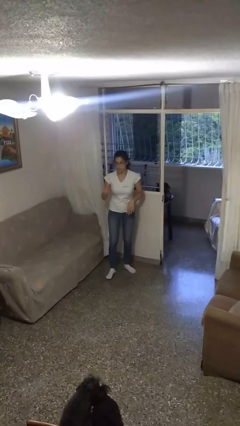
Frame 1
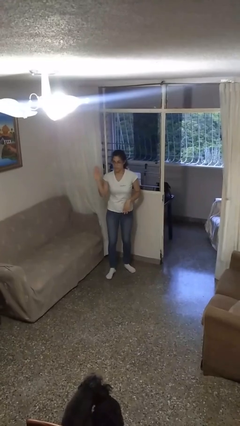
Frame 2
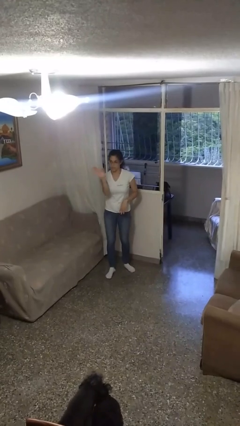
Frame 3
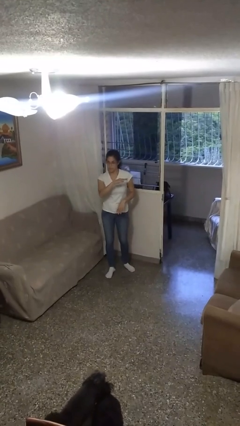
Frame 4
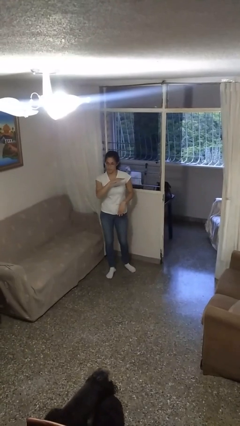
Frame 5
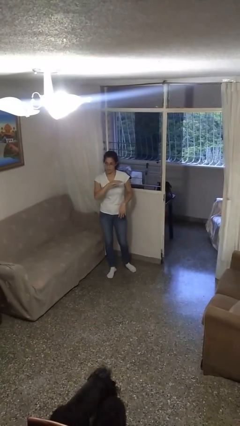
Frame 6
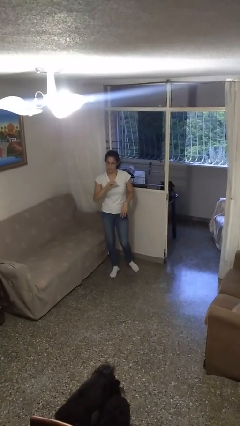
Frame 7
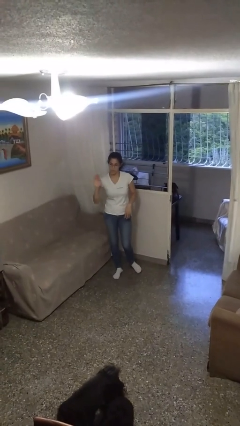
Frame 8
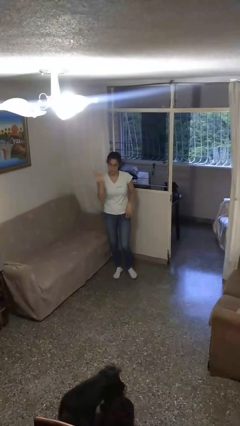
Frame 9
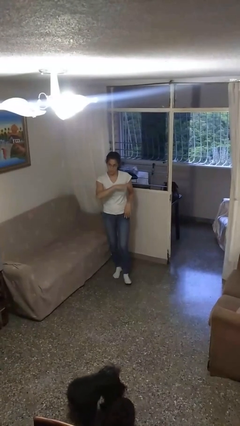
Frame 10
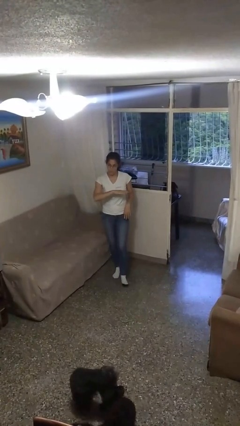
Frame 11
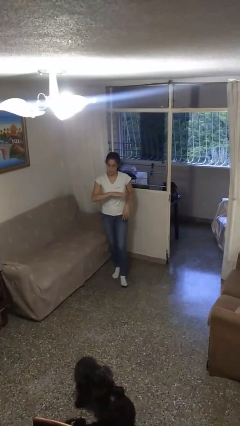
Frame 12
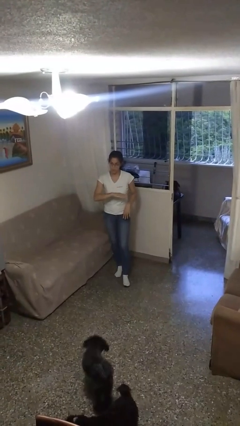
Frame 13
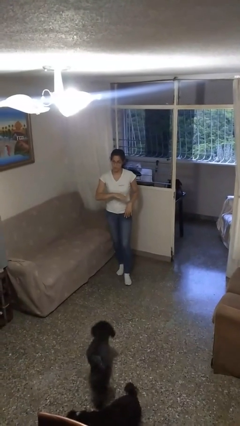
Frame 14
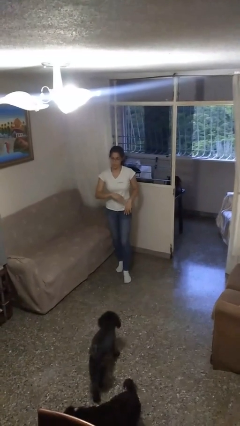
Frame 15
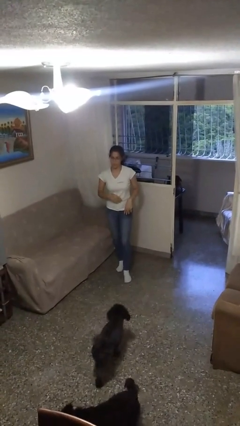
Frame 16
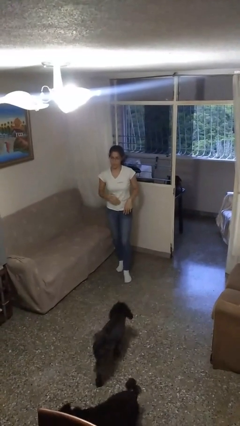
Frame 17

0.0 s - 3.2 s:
person gestures swipe left

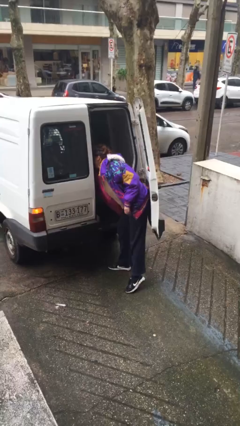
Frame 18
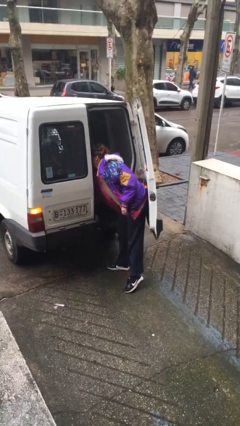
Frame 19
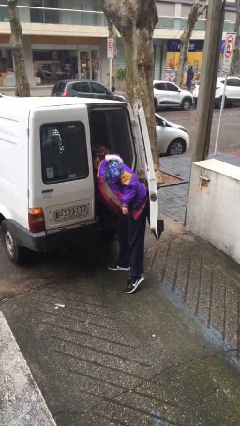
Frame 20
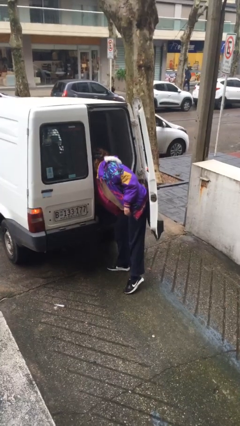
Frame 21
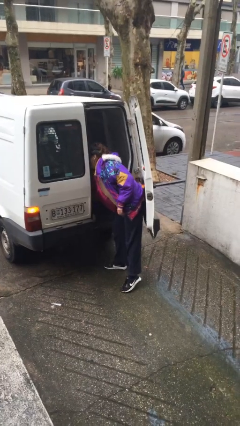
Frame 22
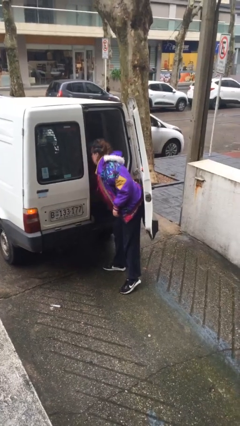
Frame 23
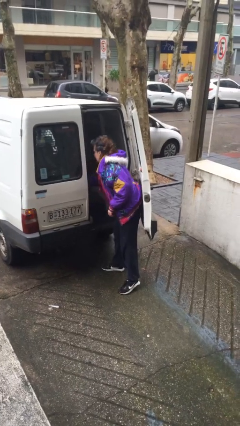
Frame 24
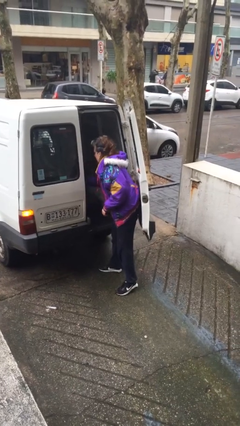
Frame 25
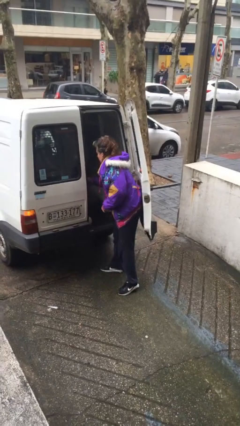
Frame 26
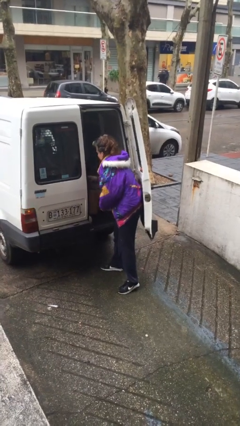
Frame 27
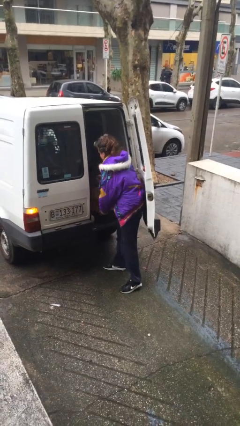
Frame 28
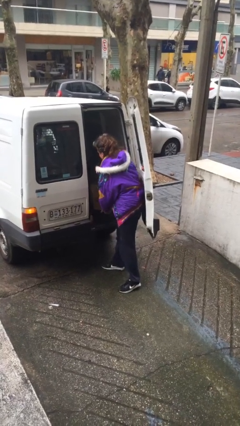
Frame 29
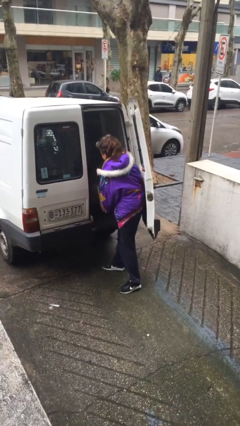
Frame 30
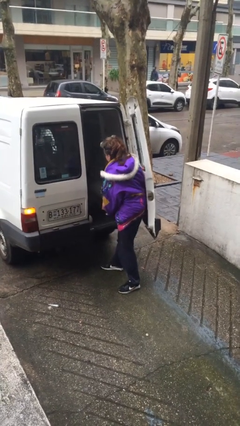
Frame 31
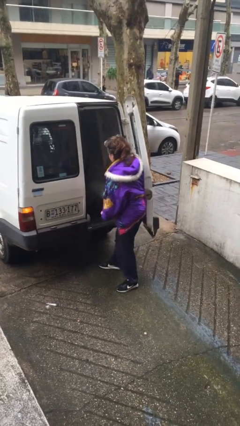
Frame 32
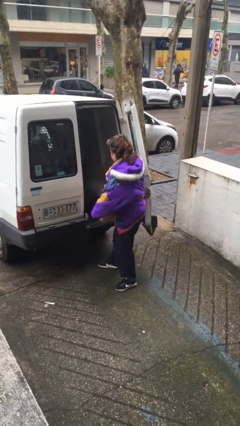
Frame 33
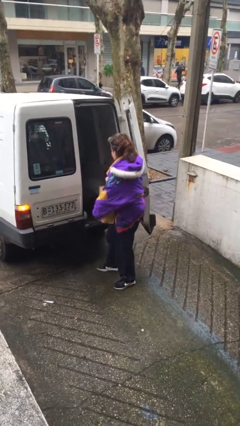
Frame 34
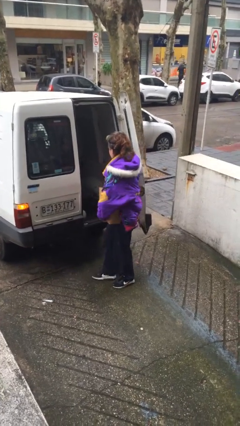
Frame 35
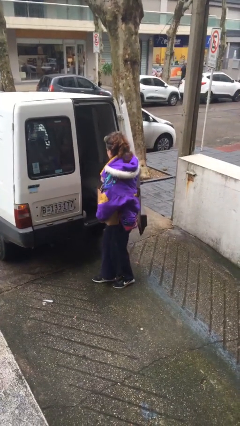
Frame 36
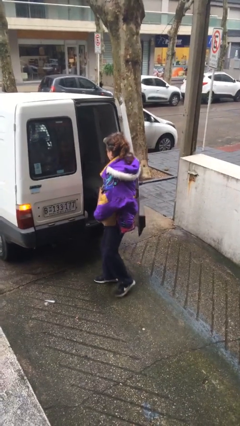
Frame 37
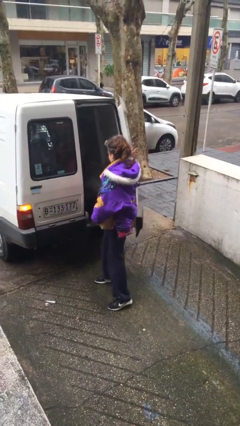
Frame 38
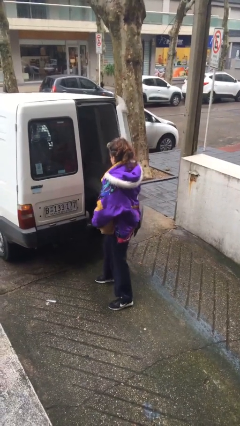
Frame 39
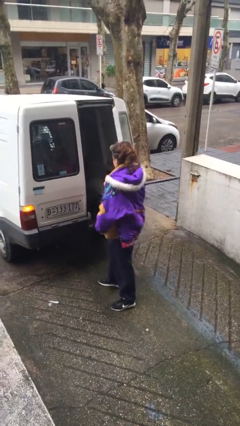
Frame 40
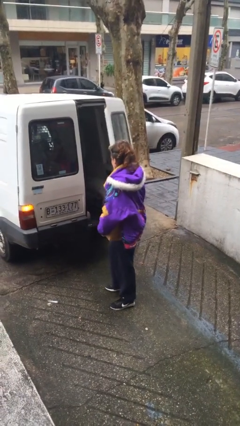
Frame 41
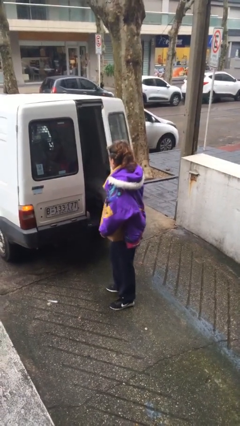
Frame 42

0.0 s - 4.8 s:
person unloads car

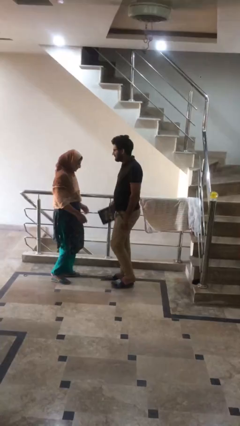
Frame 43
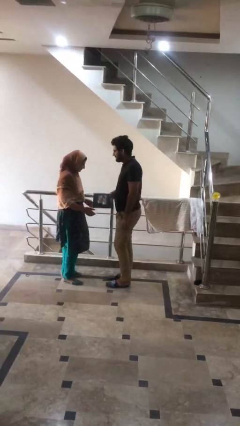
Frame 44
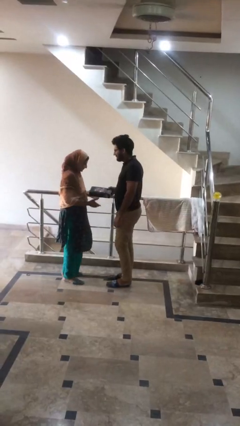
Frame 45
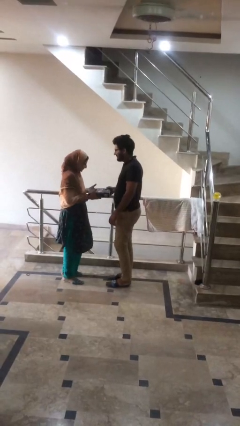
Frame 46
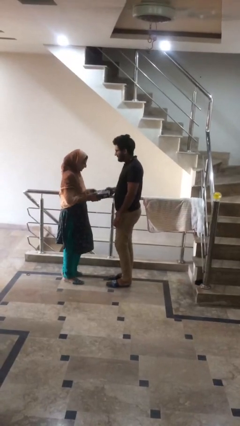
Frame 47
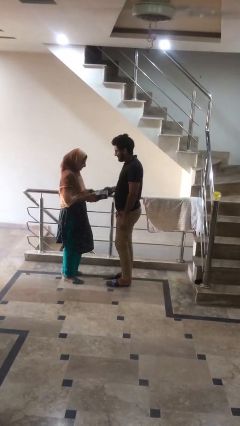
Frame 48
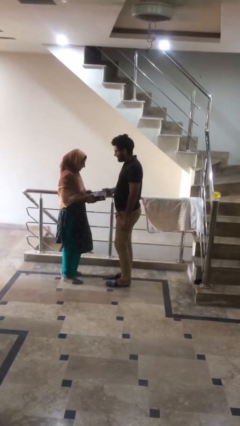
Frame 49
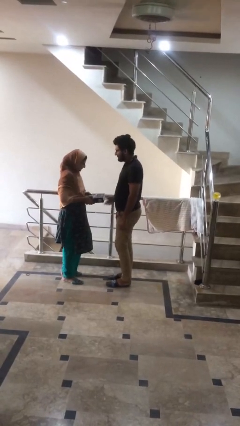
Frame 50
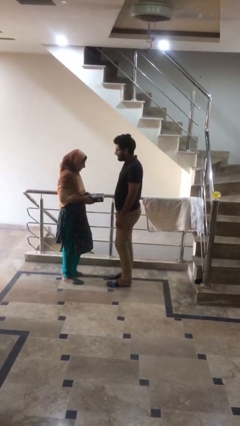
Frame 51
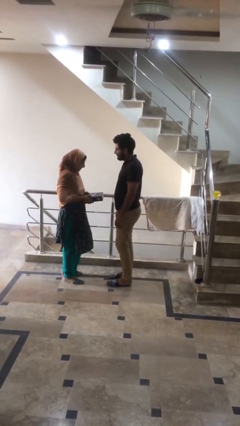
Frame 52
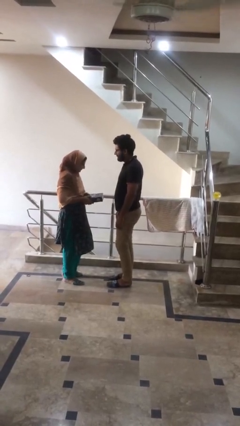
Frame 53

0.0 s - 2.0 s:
person transfers object to person

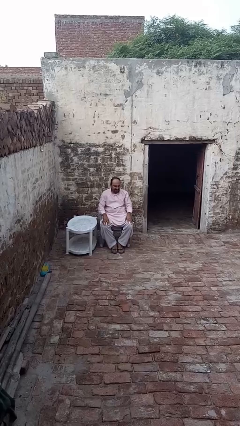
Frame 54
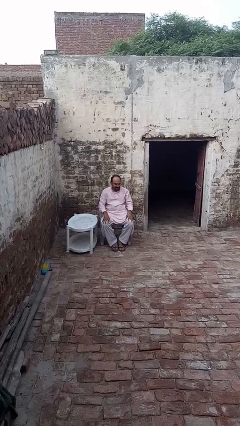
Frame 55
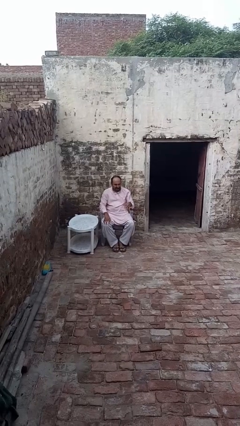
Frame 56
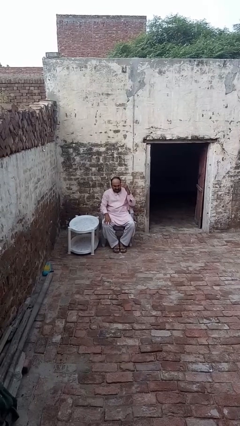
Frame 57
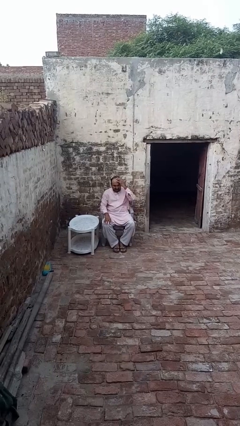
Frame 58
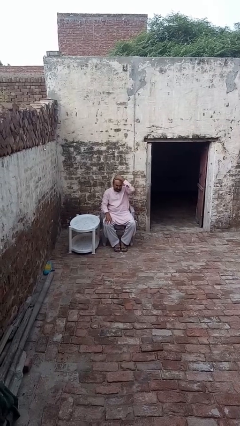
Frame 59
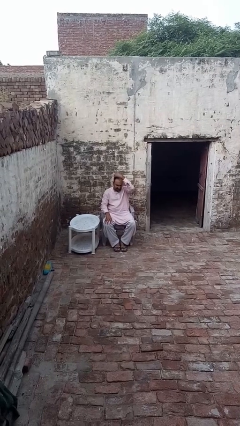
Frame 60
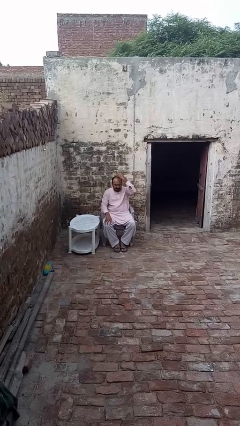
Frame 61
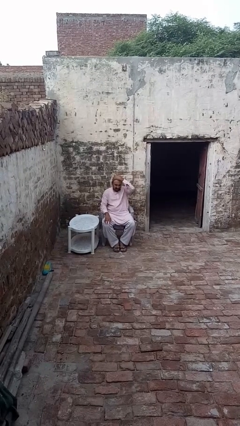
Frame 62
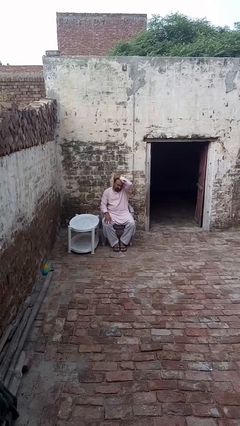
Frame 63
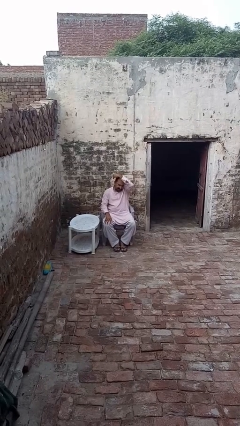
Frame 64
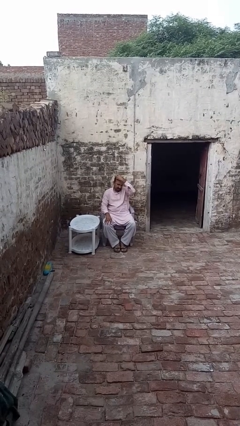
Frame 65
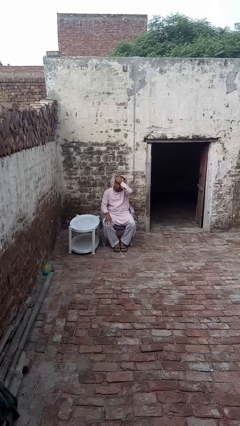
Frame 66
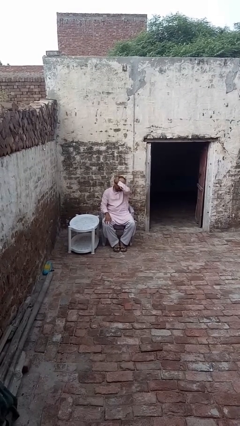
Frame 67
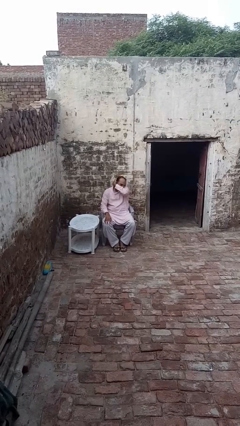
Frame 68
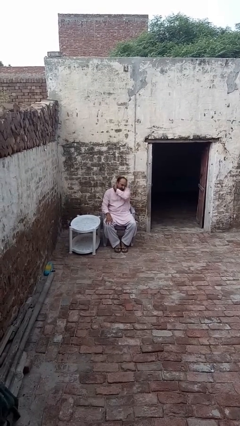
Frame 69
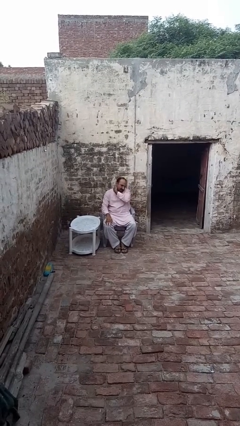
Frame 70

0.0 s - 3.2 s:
person strokes hair

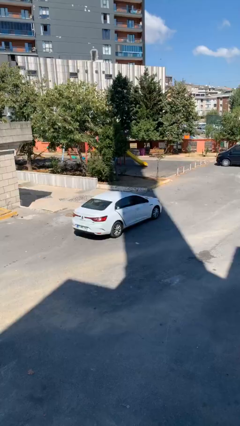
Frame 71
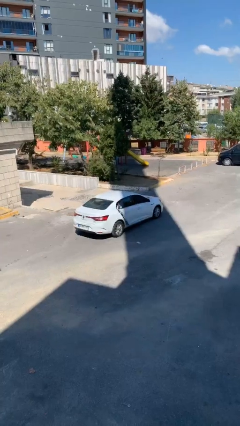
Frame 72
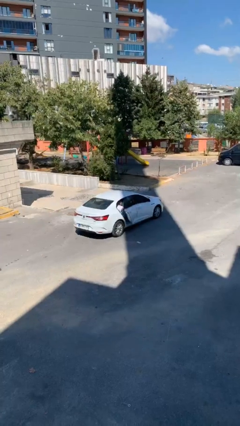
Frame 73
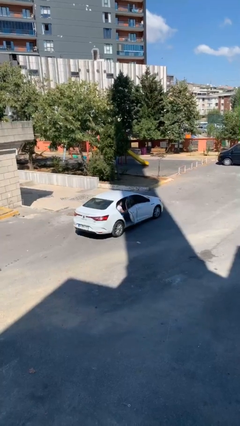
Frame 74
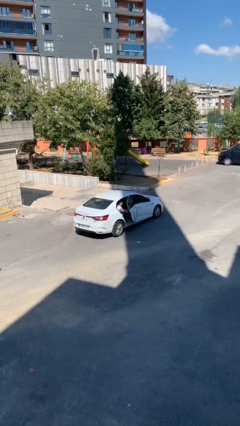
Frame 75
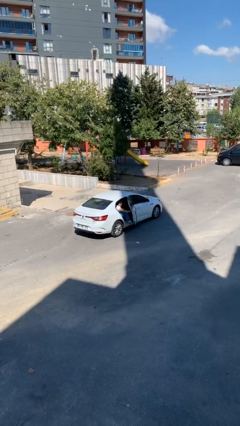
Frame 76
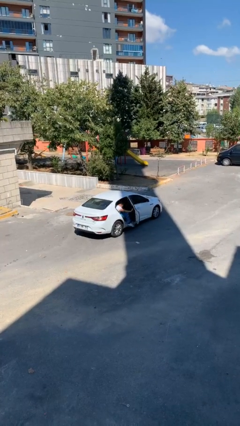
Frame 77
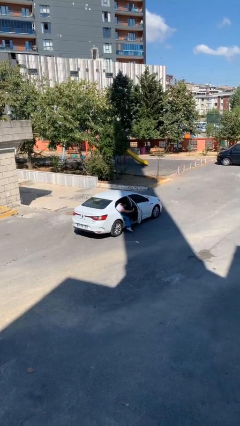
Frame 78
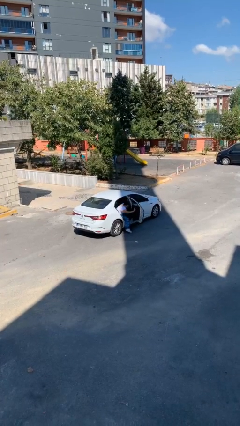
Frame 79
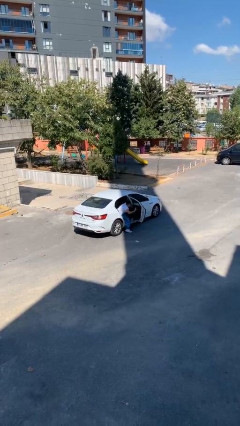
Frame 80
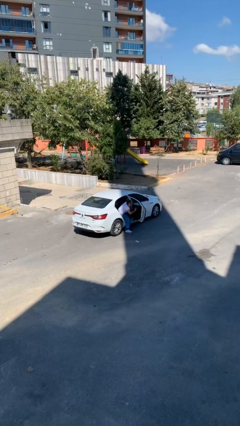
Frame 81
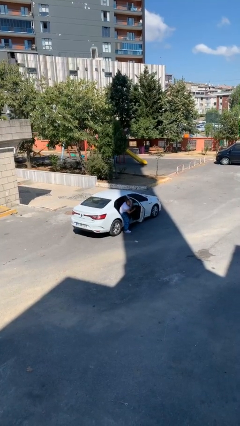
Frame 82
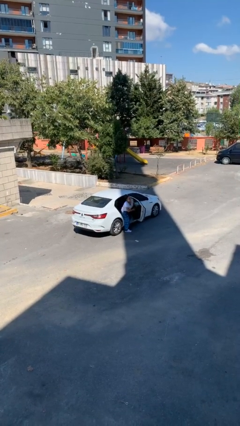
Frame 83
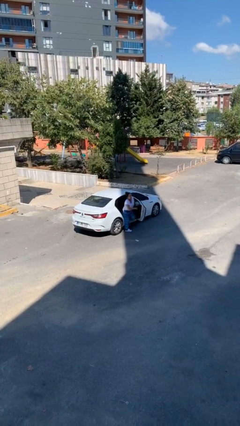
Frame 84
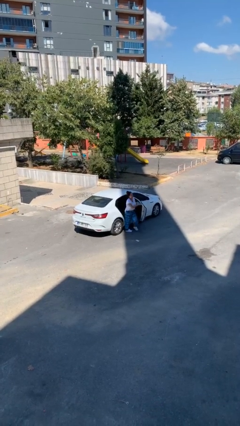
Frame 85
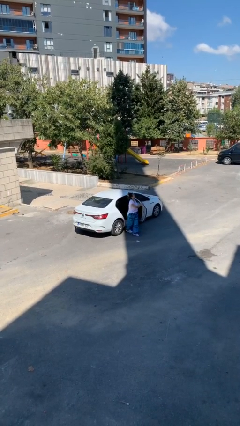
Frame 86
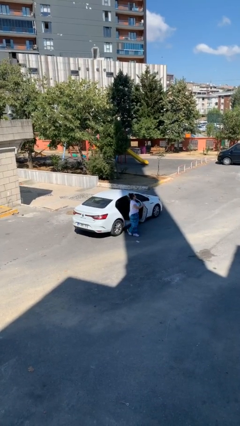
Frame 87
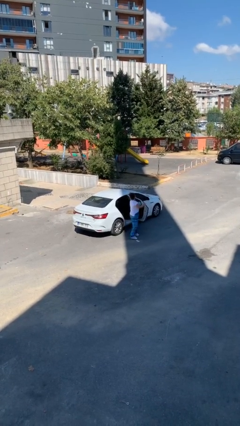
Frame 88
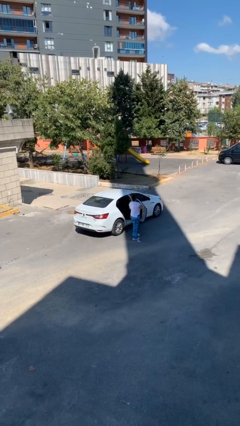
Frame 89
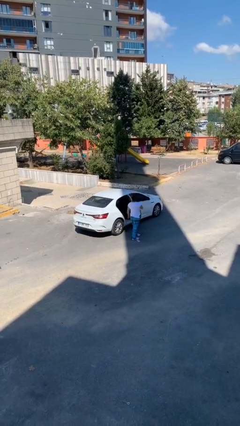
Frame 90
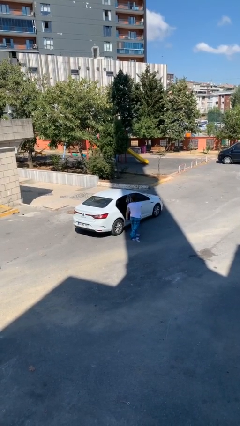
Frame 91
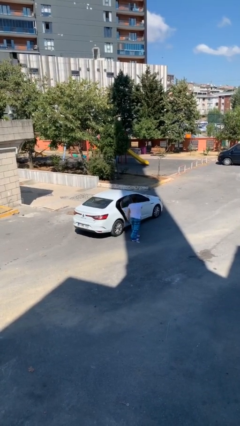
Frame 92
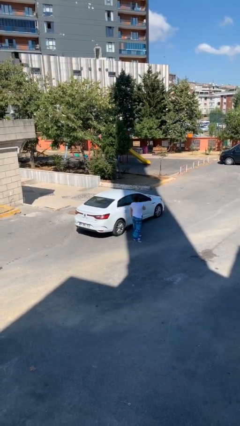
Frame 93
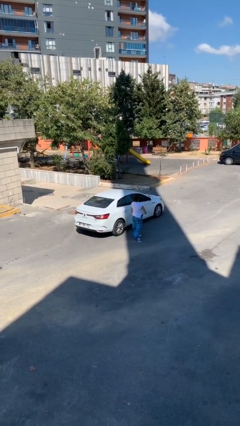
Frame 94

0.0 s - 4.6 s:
car drops off person
